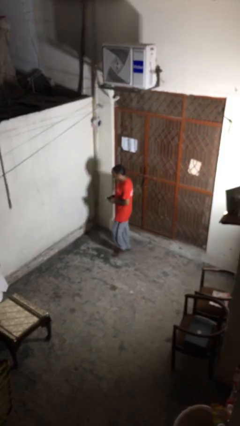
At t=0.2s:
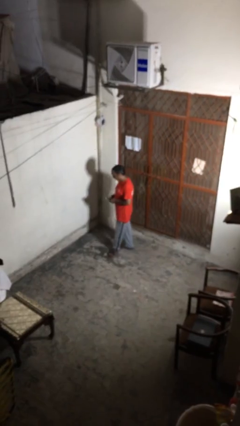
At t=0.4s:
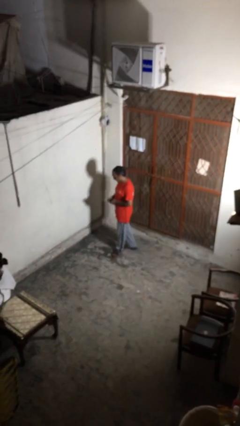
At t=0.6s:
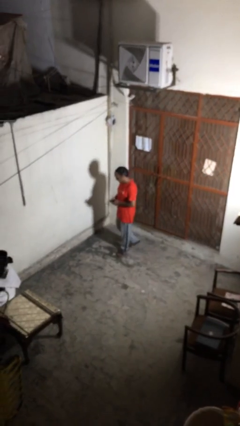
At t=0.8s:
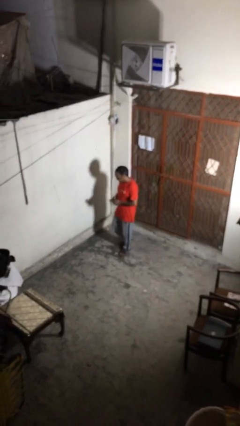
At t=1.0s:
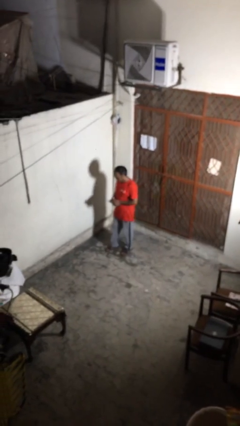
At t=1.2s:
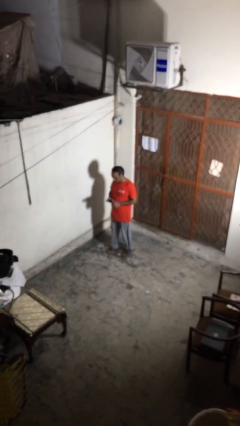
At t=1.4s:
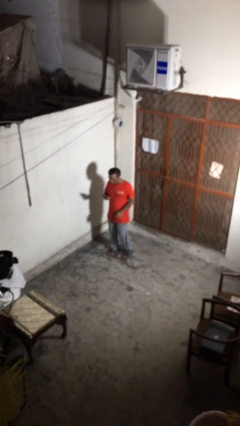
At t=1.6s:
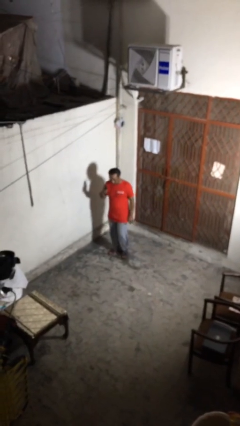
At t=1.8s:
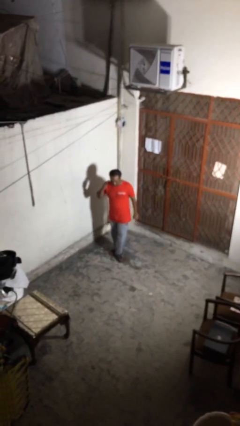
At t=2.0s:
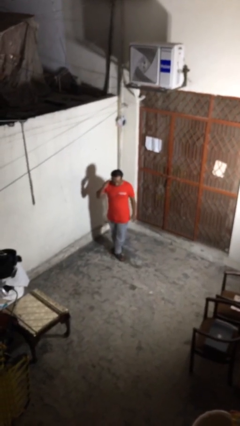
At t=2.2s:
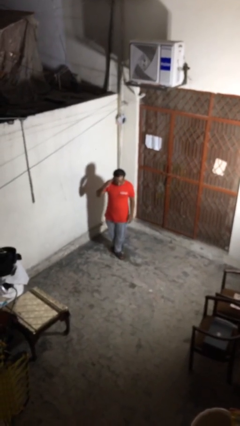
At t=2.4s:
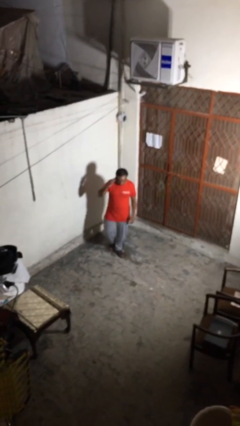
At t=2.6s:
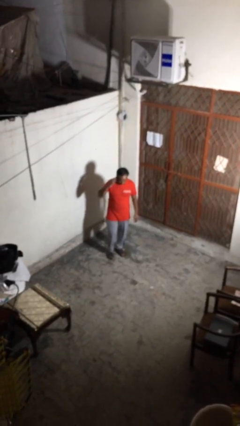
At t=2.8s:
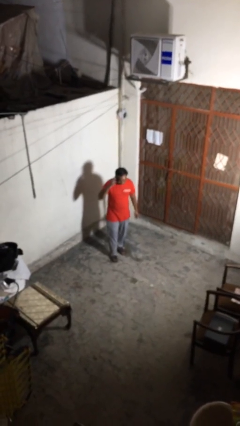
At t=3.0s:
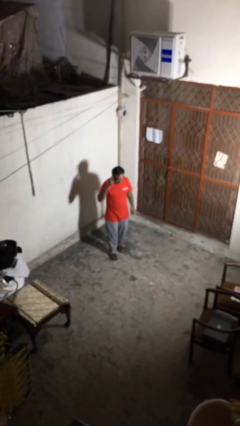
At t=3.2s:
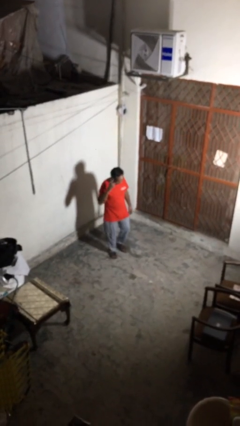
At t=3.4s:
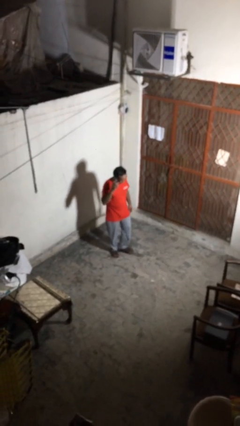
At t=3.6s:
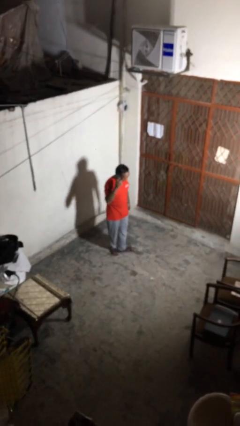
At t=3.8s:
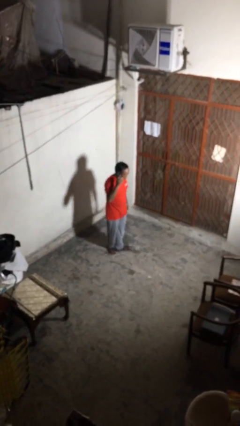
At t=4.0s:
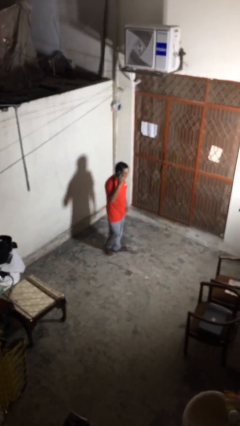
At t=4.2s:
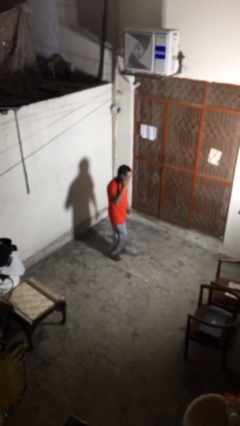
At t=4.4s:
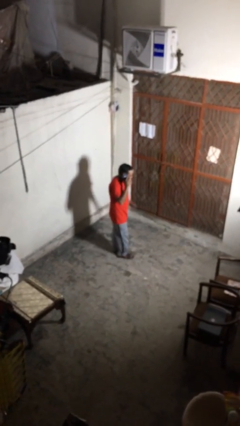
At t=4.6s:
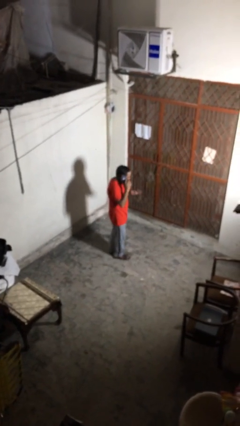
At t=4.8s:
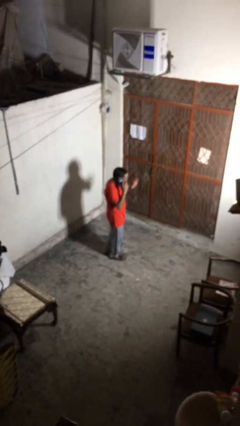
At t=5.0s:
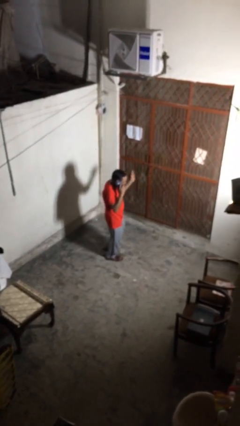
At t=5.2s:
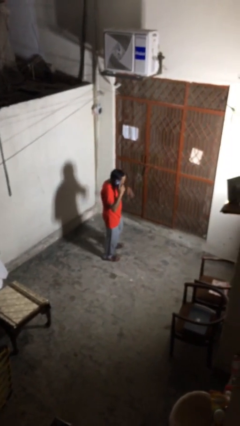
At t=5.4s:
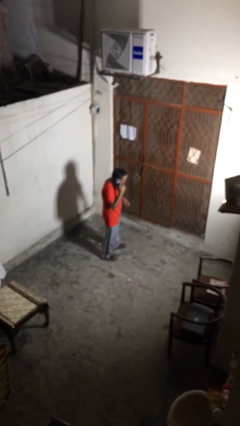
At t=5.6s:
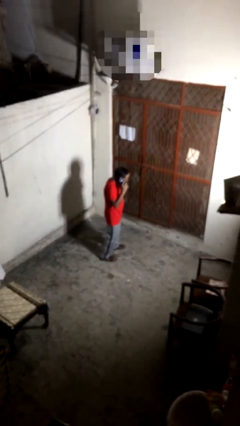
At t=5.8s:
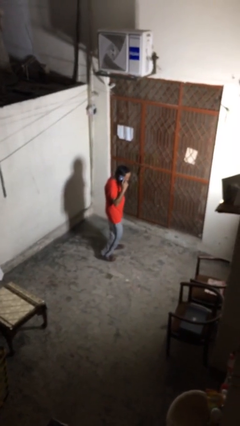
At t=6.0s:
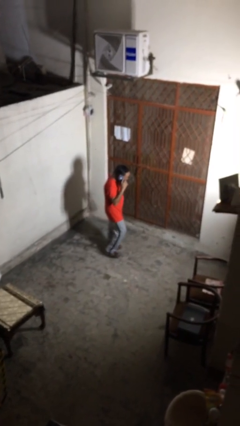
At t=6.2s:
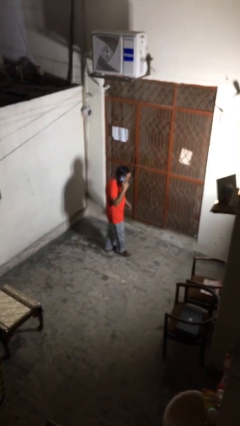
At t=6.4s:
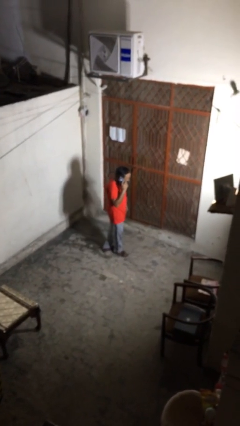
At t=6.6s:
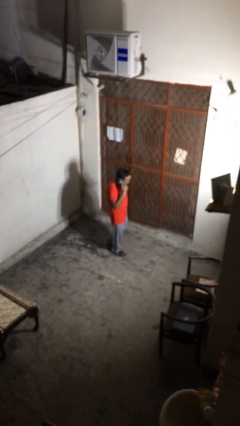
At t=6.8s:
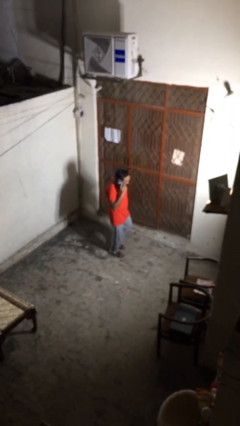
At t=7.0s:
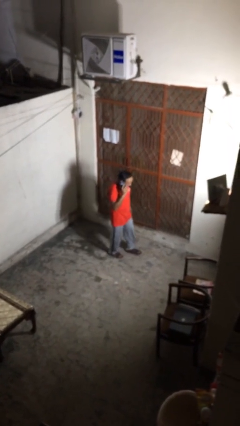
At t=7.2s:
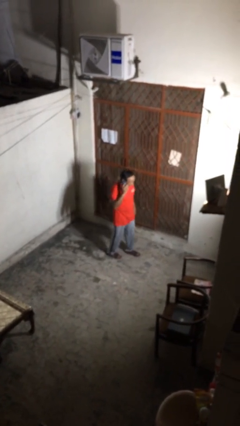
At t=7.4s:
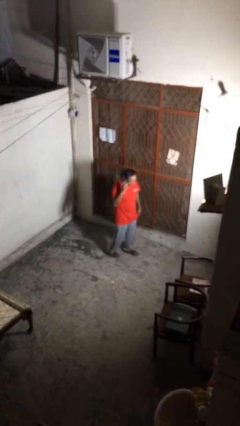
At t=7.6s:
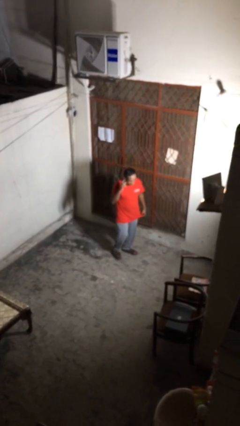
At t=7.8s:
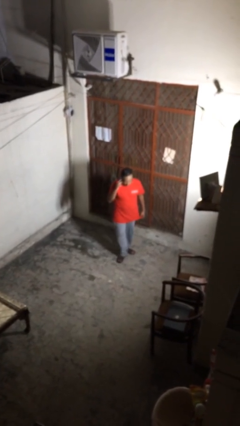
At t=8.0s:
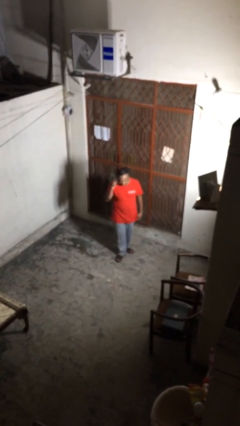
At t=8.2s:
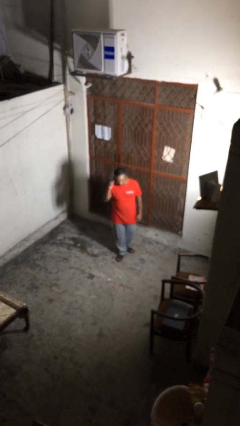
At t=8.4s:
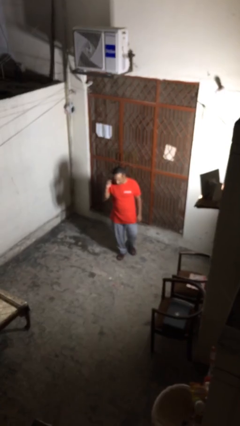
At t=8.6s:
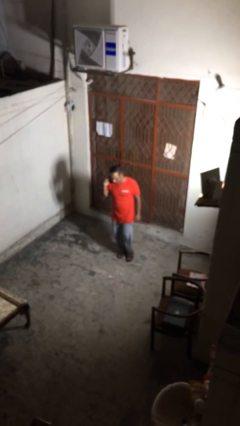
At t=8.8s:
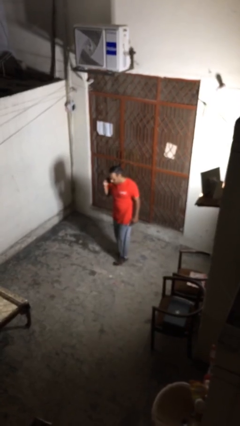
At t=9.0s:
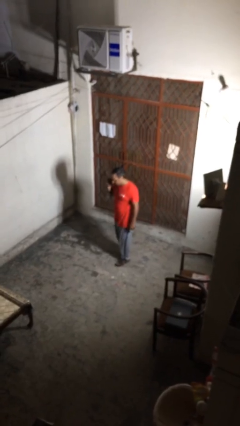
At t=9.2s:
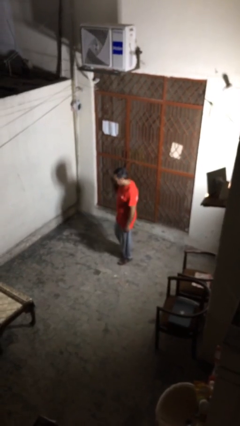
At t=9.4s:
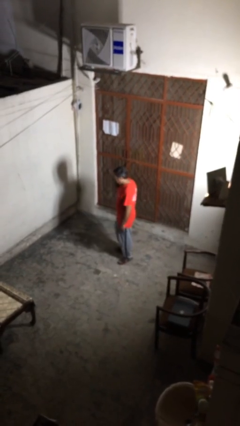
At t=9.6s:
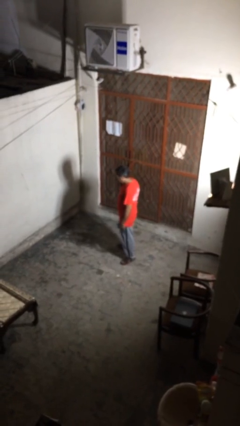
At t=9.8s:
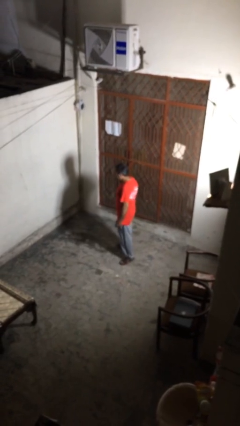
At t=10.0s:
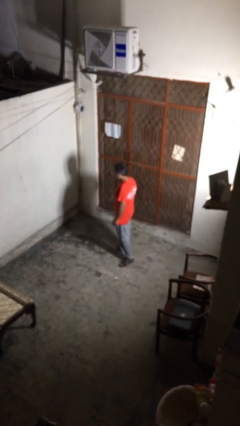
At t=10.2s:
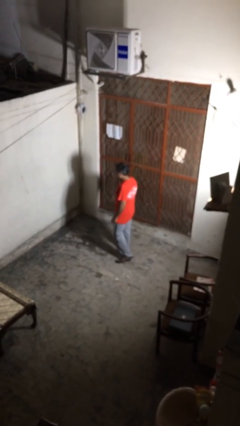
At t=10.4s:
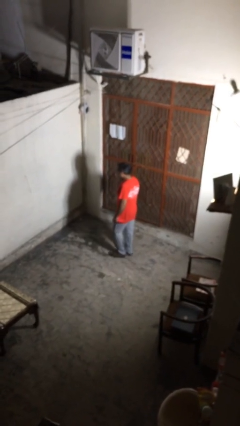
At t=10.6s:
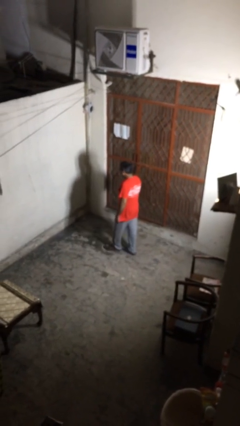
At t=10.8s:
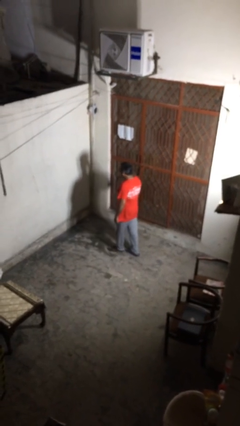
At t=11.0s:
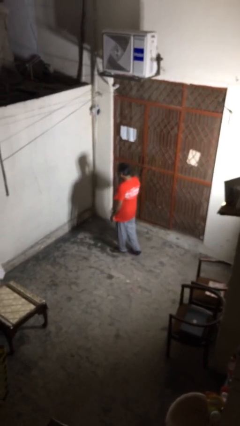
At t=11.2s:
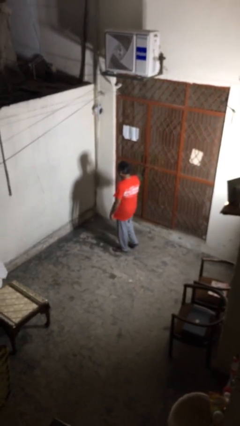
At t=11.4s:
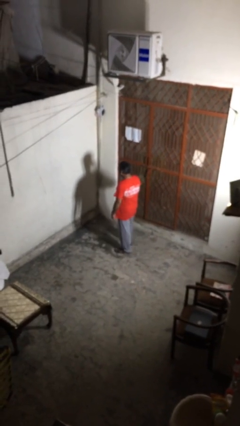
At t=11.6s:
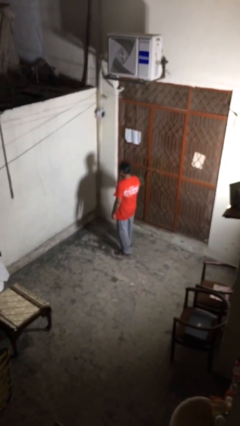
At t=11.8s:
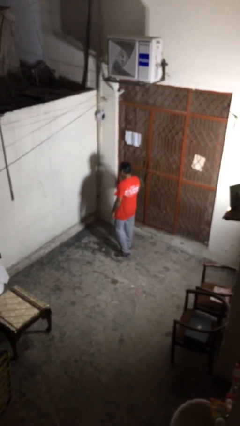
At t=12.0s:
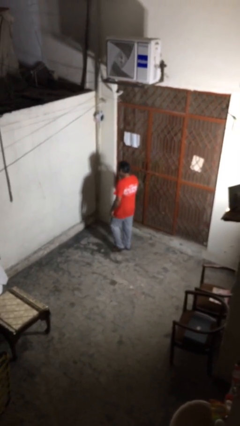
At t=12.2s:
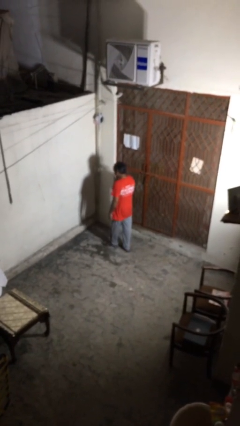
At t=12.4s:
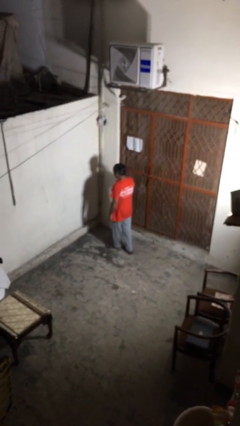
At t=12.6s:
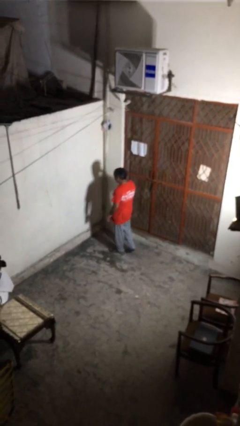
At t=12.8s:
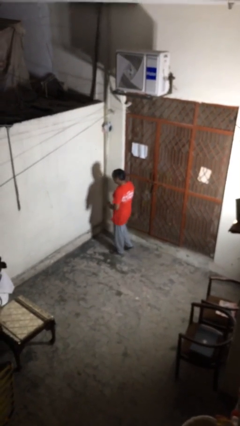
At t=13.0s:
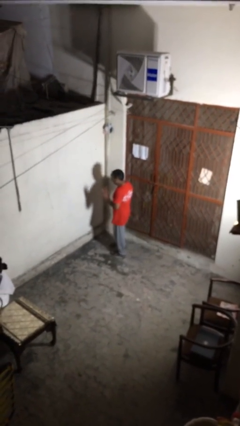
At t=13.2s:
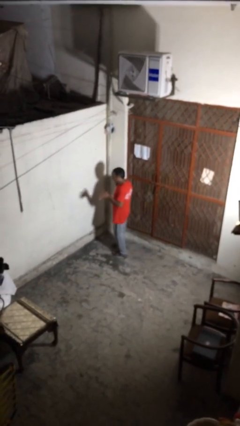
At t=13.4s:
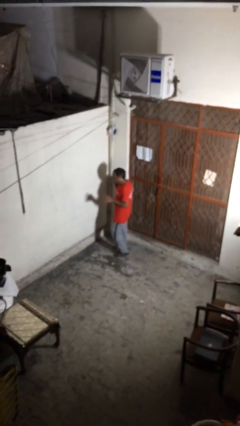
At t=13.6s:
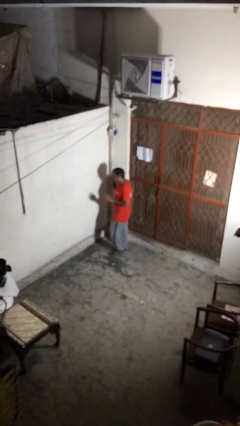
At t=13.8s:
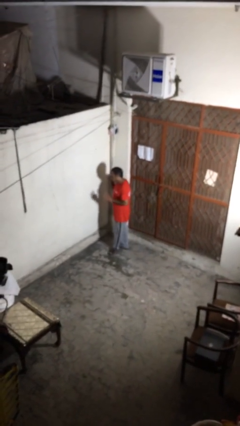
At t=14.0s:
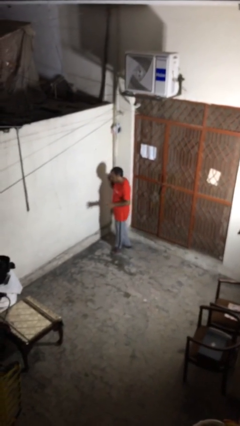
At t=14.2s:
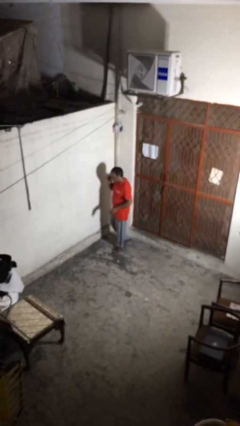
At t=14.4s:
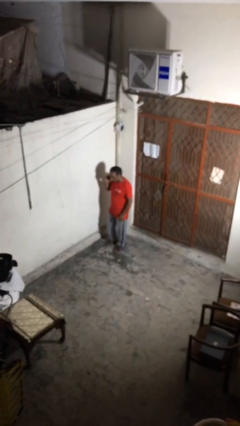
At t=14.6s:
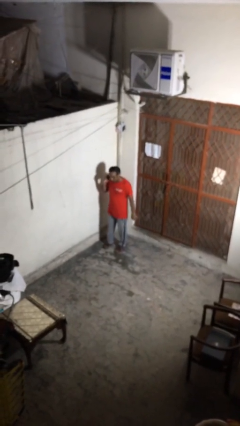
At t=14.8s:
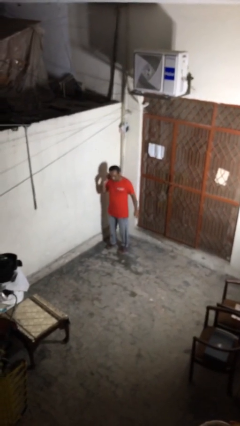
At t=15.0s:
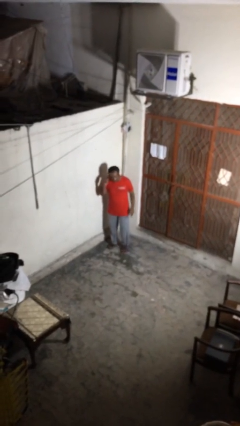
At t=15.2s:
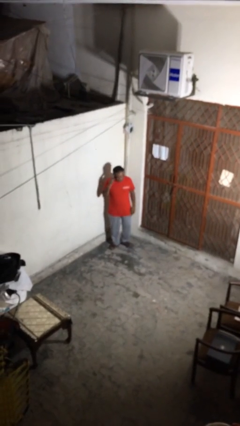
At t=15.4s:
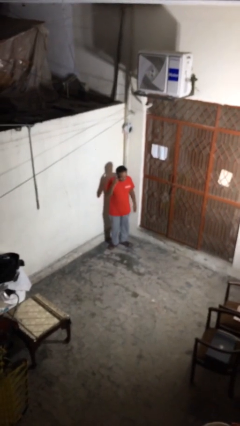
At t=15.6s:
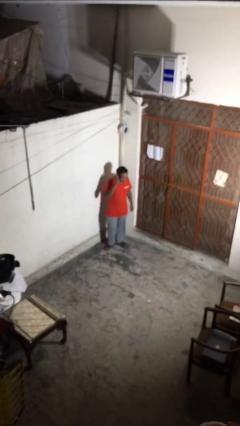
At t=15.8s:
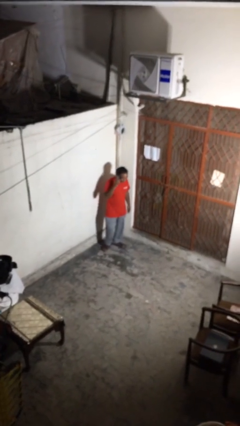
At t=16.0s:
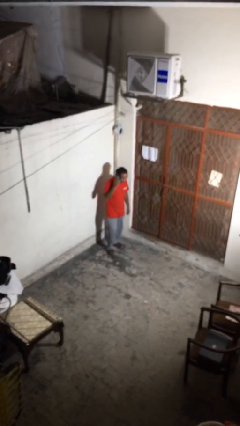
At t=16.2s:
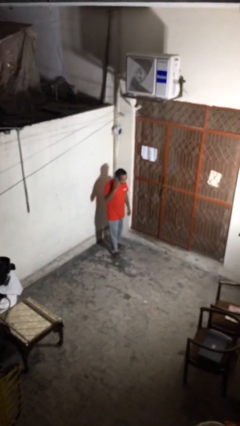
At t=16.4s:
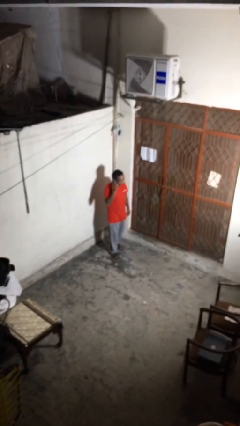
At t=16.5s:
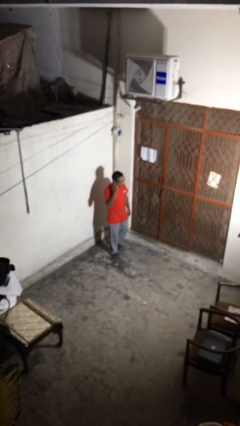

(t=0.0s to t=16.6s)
person talks on phone

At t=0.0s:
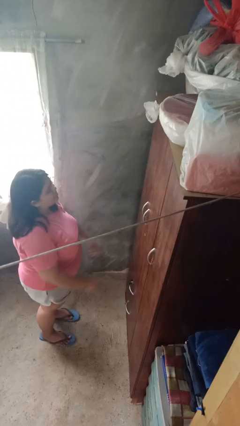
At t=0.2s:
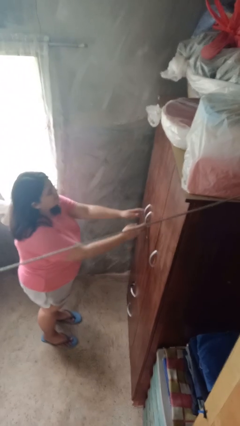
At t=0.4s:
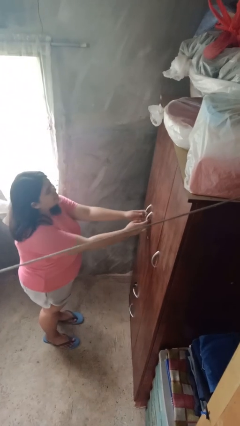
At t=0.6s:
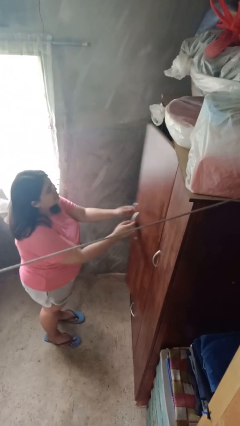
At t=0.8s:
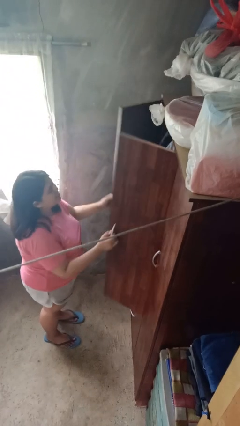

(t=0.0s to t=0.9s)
person opens closet door

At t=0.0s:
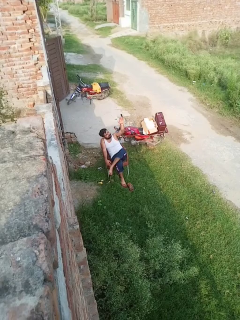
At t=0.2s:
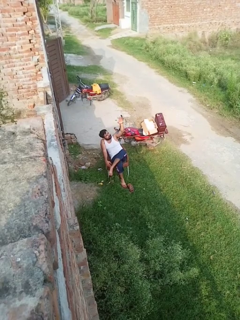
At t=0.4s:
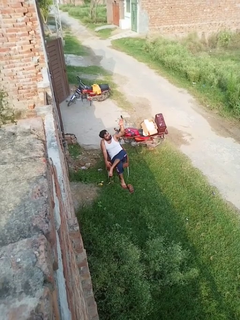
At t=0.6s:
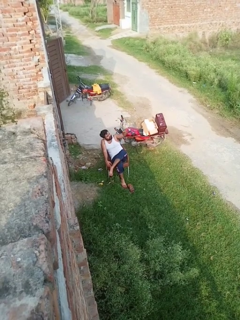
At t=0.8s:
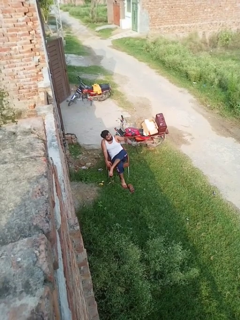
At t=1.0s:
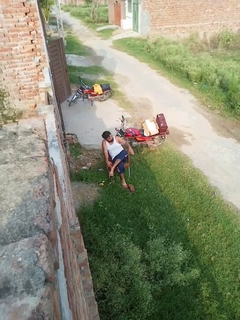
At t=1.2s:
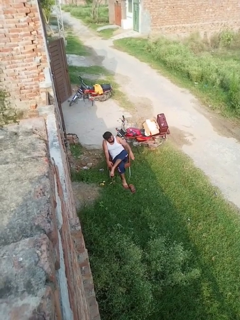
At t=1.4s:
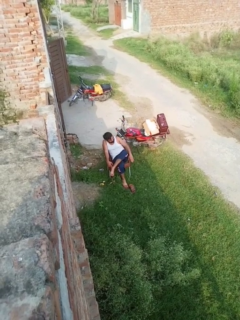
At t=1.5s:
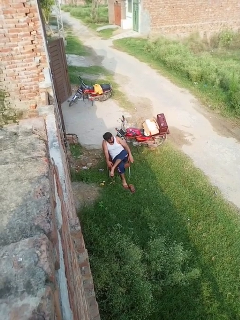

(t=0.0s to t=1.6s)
person gestures swipe down
